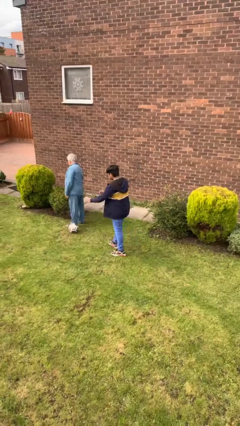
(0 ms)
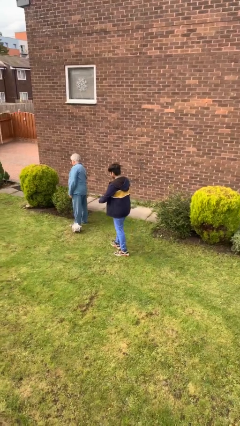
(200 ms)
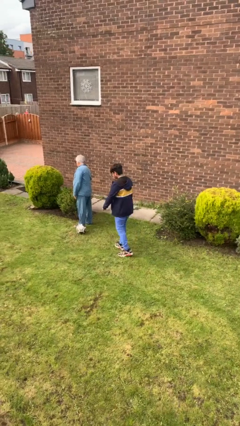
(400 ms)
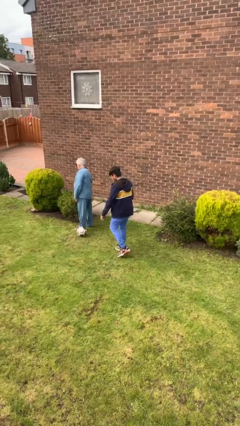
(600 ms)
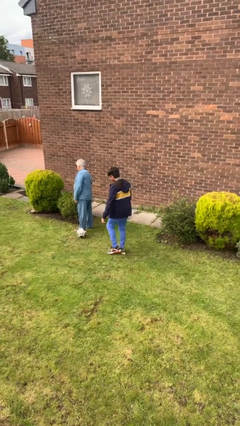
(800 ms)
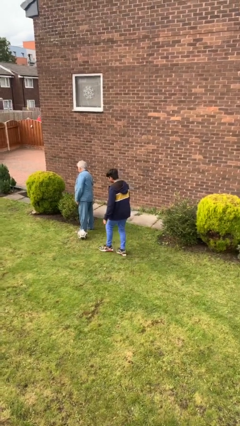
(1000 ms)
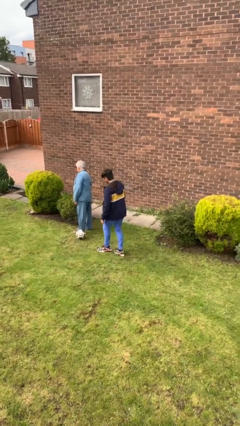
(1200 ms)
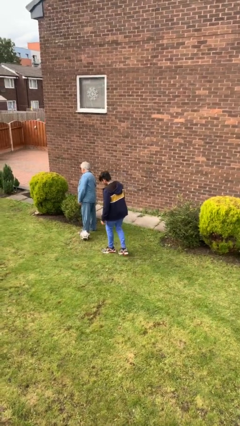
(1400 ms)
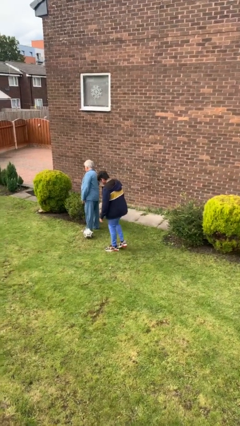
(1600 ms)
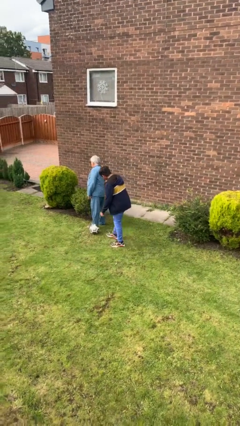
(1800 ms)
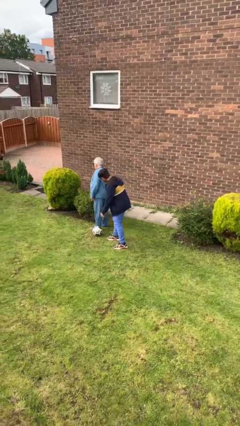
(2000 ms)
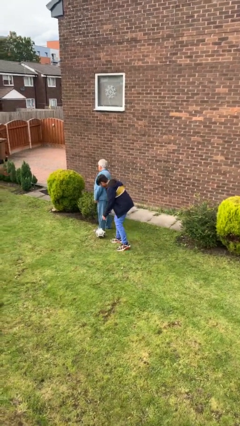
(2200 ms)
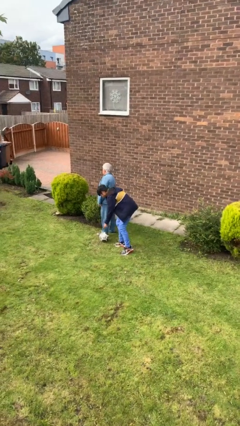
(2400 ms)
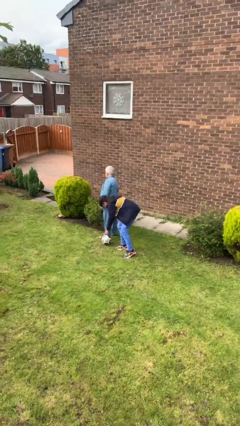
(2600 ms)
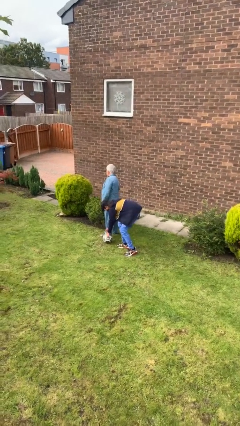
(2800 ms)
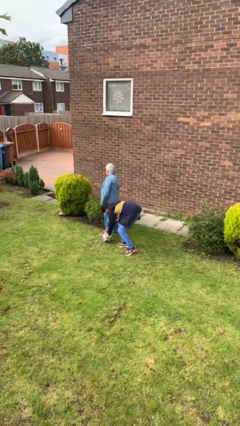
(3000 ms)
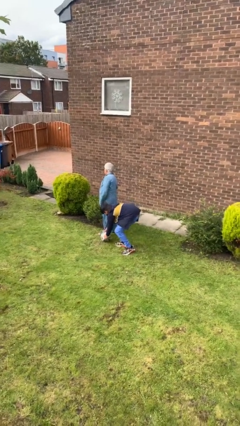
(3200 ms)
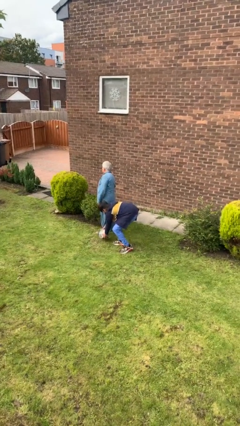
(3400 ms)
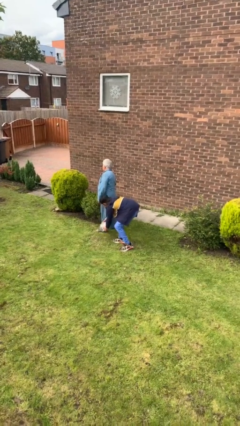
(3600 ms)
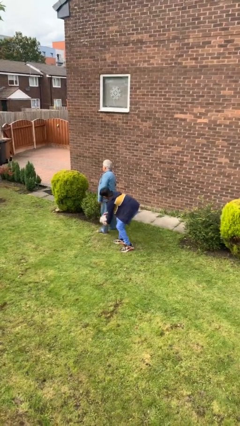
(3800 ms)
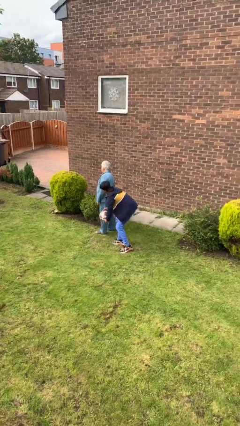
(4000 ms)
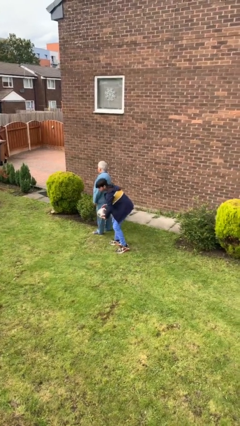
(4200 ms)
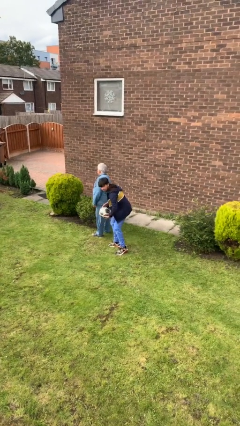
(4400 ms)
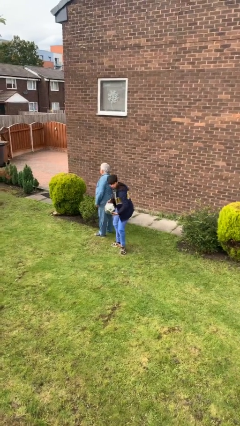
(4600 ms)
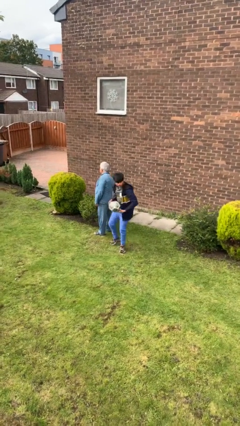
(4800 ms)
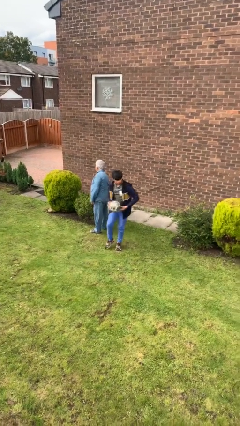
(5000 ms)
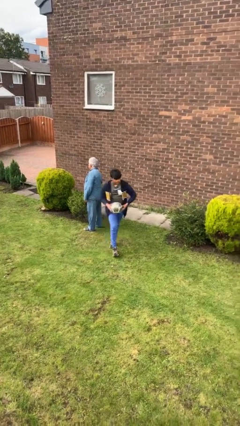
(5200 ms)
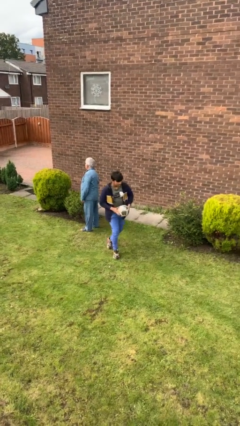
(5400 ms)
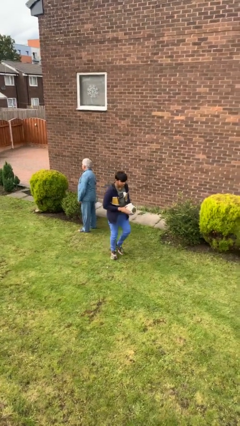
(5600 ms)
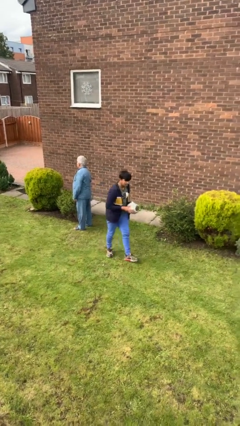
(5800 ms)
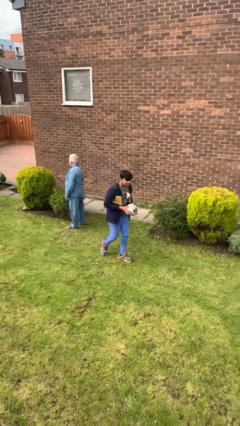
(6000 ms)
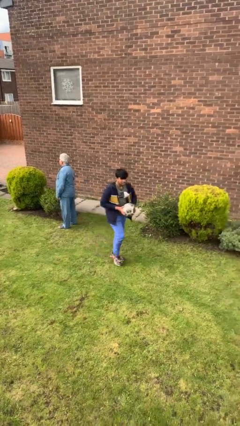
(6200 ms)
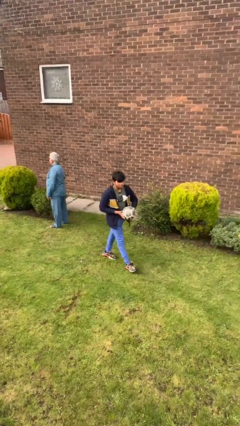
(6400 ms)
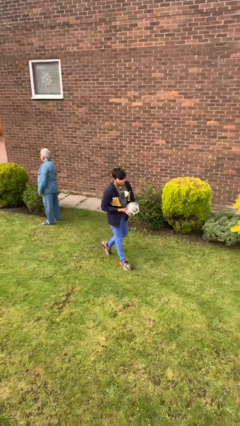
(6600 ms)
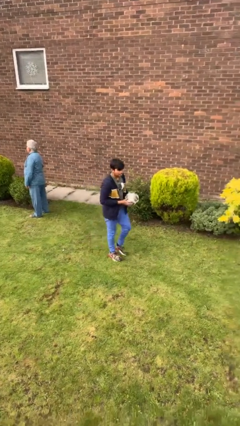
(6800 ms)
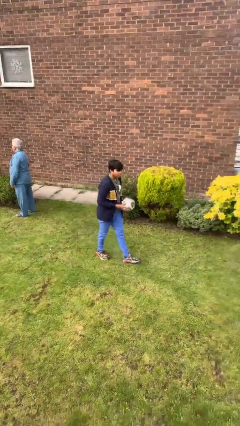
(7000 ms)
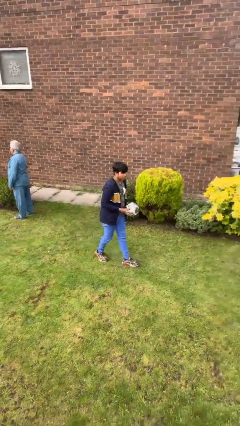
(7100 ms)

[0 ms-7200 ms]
person steals object from person

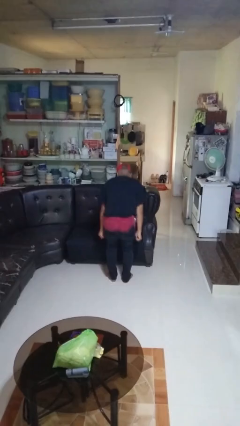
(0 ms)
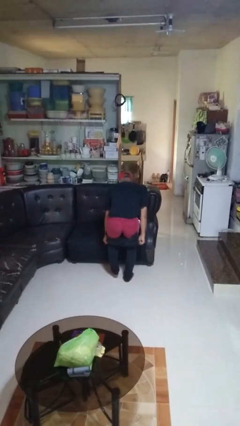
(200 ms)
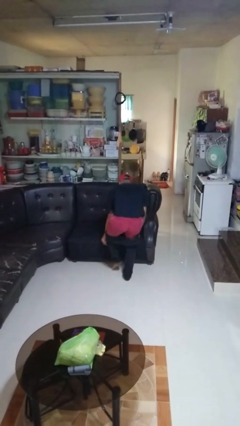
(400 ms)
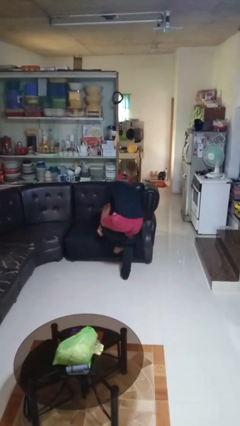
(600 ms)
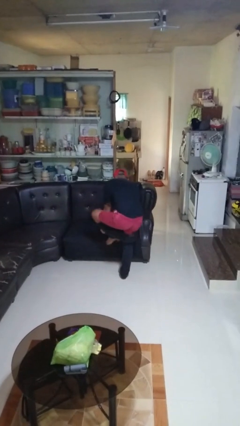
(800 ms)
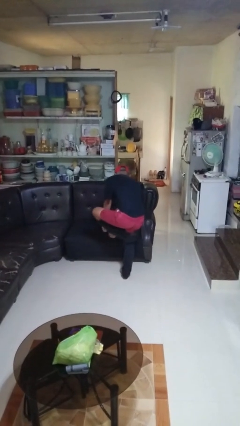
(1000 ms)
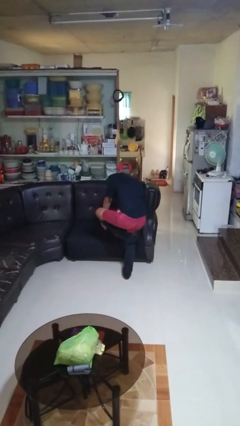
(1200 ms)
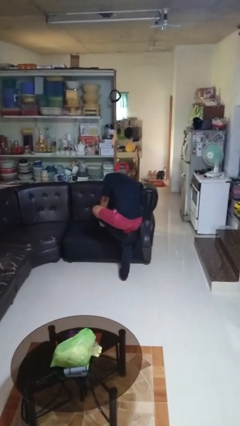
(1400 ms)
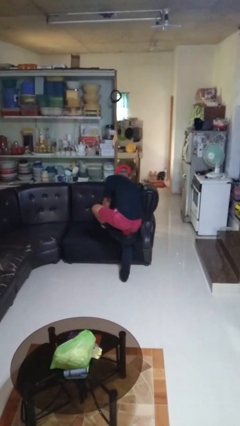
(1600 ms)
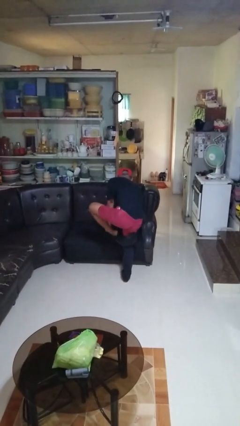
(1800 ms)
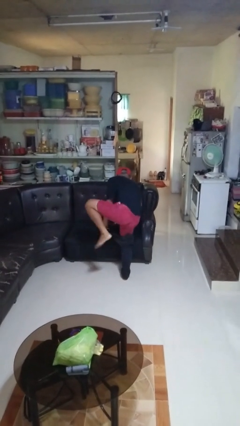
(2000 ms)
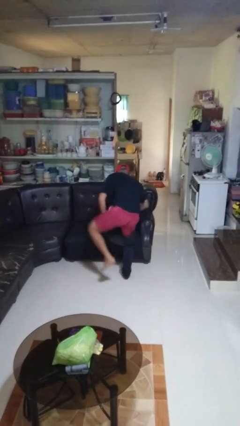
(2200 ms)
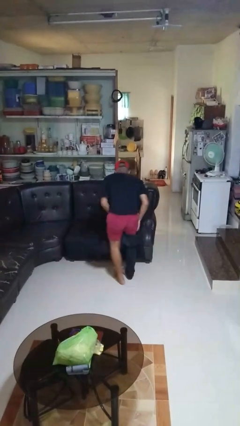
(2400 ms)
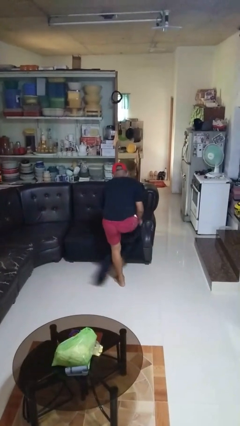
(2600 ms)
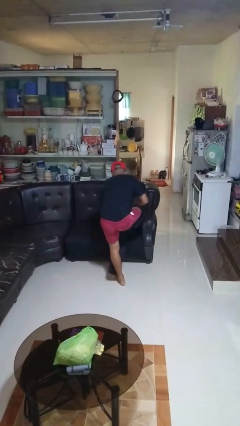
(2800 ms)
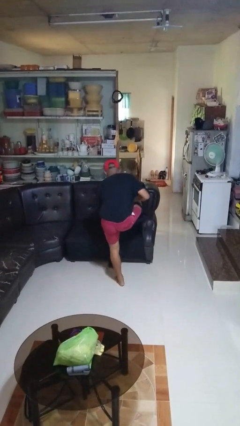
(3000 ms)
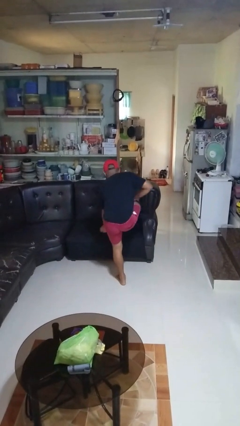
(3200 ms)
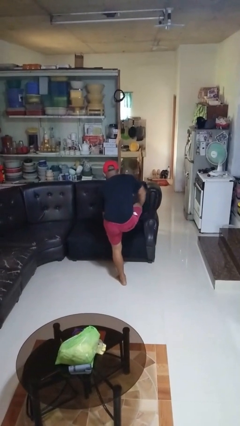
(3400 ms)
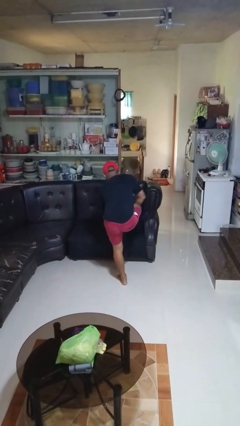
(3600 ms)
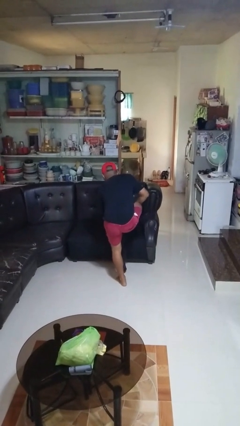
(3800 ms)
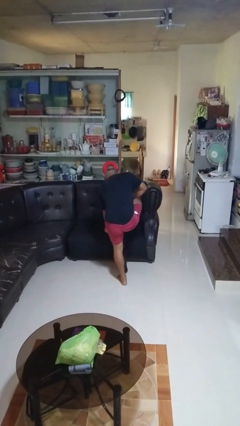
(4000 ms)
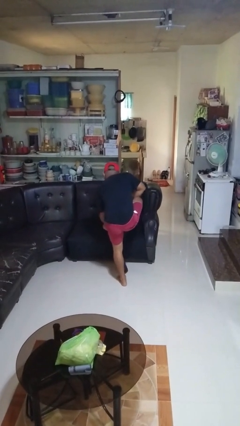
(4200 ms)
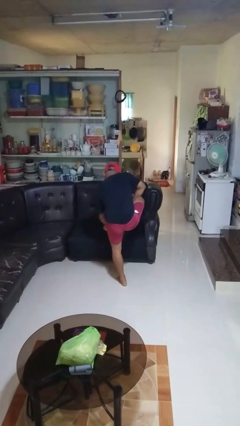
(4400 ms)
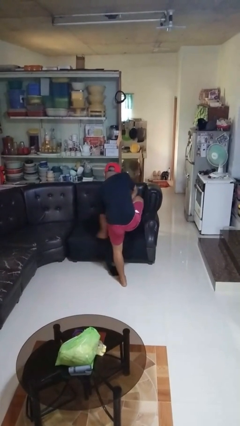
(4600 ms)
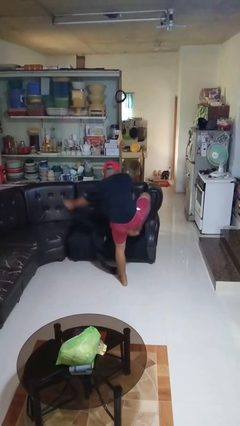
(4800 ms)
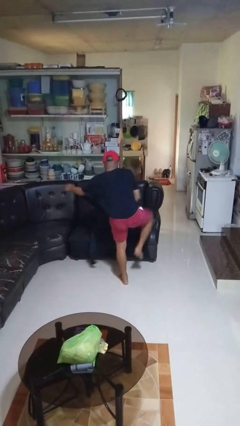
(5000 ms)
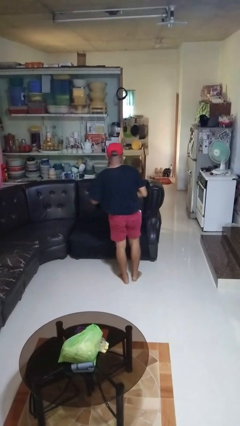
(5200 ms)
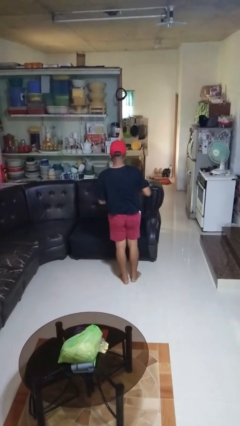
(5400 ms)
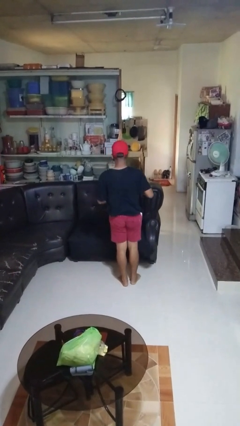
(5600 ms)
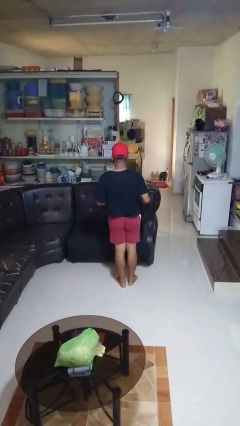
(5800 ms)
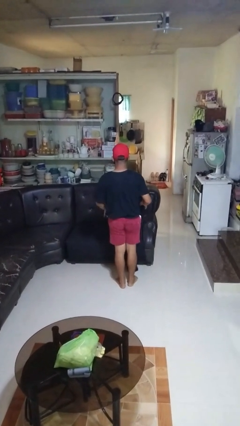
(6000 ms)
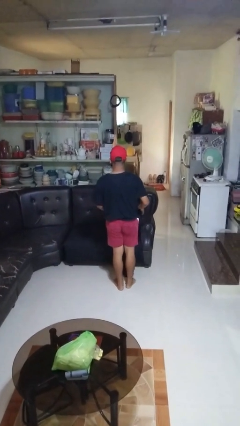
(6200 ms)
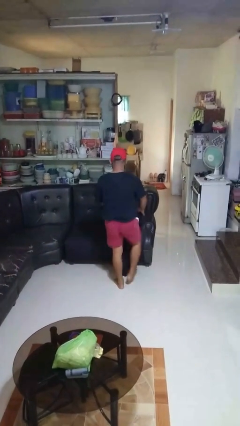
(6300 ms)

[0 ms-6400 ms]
person takes off pants

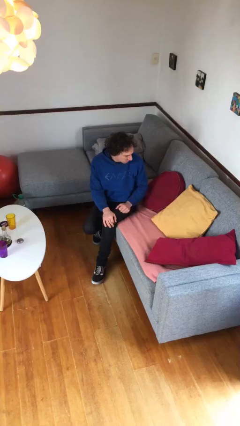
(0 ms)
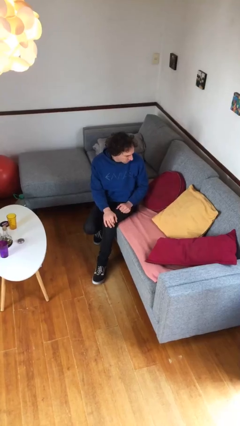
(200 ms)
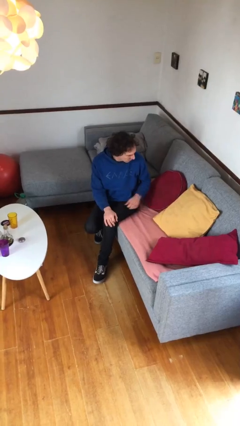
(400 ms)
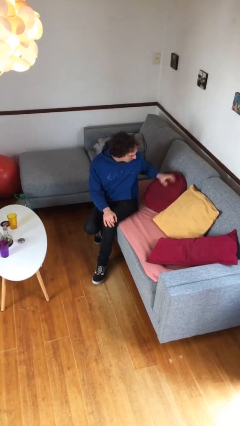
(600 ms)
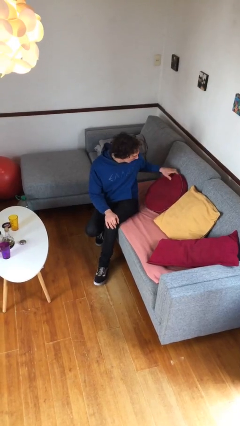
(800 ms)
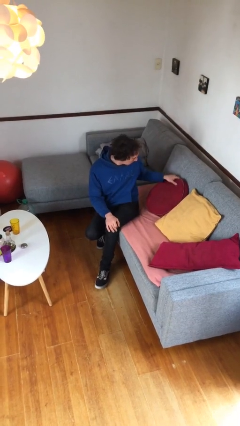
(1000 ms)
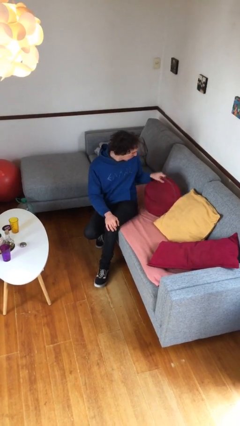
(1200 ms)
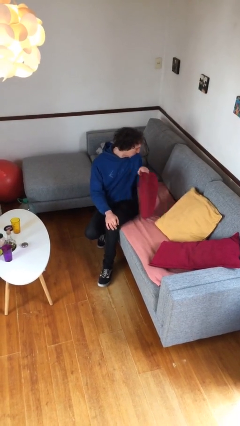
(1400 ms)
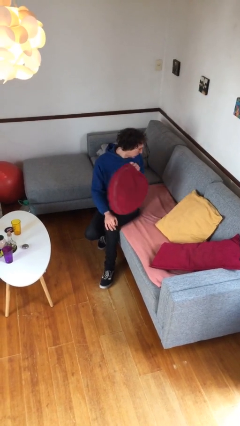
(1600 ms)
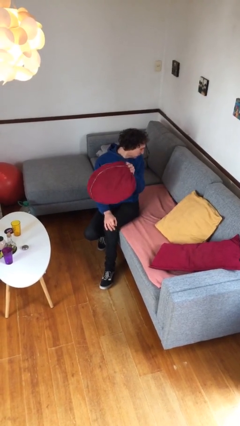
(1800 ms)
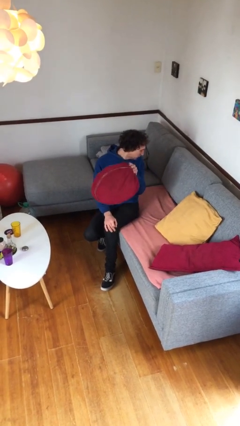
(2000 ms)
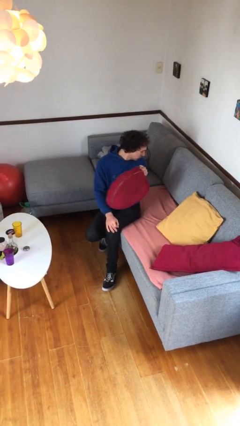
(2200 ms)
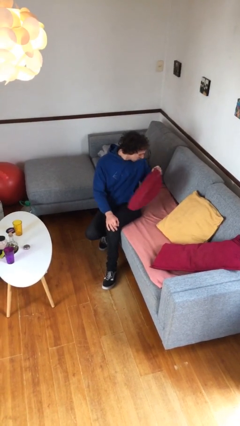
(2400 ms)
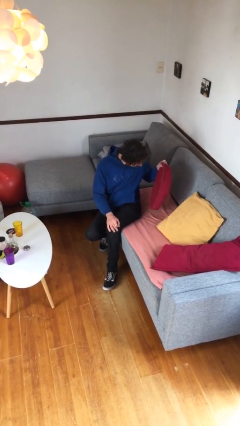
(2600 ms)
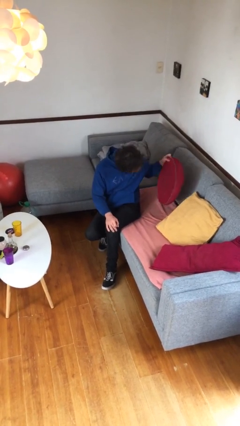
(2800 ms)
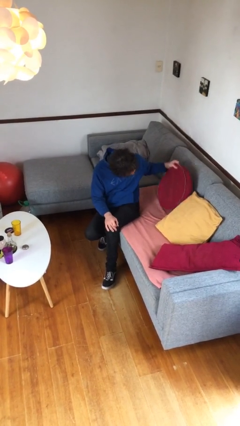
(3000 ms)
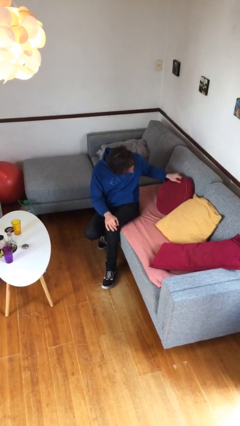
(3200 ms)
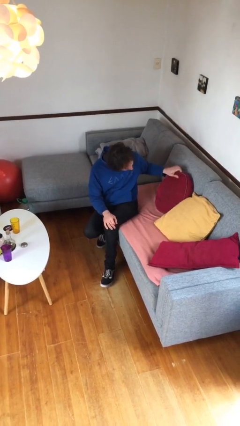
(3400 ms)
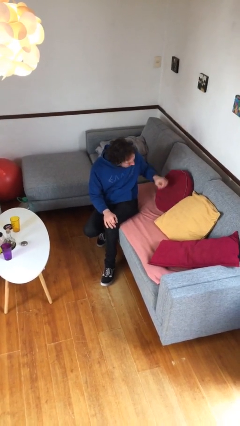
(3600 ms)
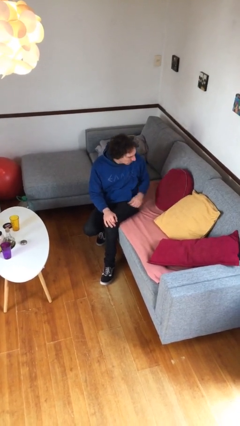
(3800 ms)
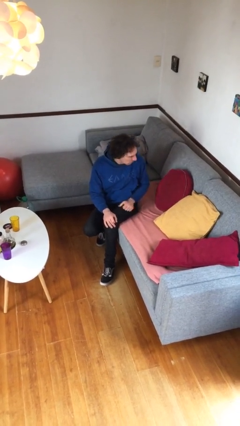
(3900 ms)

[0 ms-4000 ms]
person searches in couch
